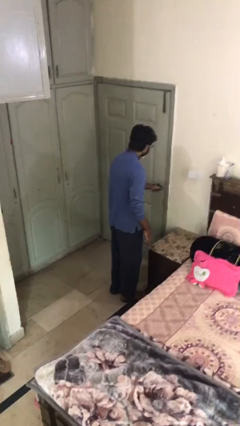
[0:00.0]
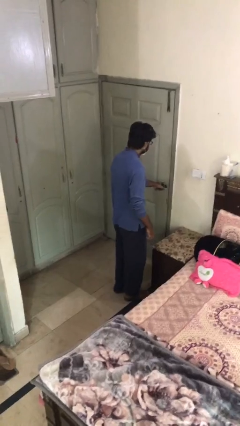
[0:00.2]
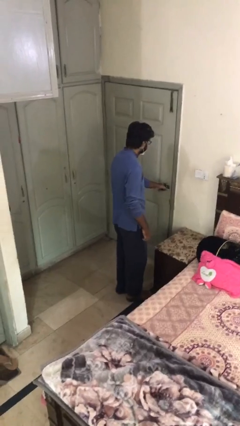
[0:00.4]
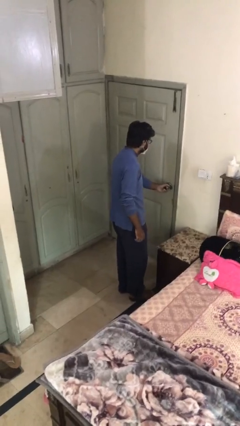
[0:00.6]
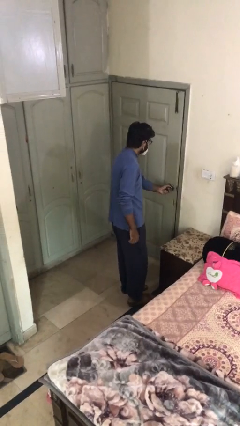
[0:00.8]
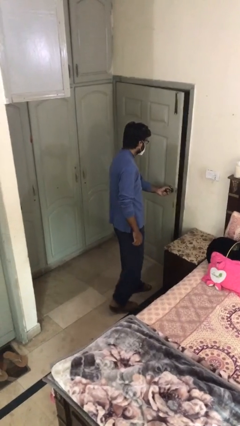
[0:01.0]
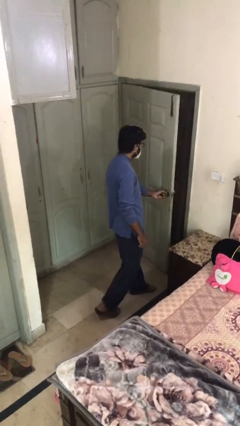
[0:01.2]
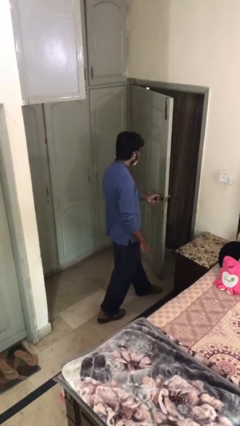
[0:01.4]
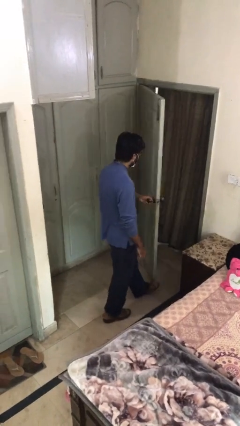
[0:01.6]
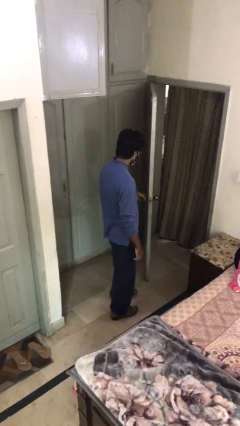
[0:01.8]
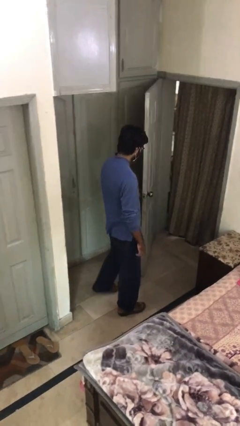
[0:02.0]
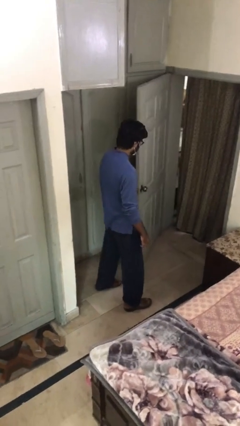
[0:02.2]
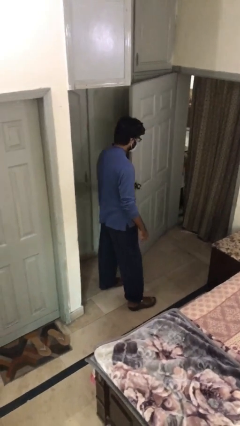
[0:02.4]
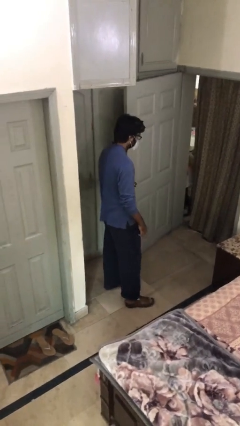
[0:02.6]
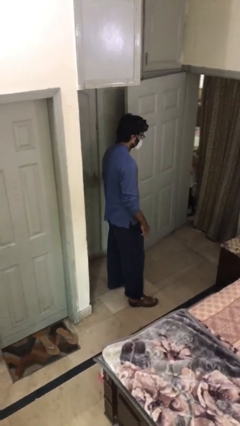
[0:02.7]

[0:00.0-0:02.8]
person opens facility door

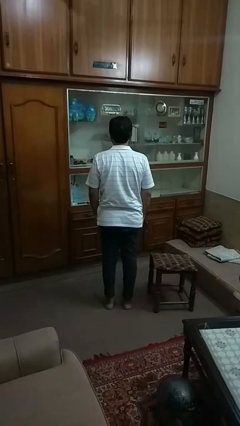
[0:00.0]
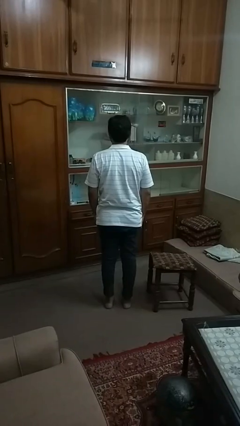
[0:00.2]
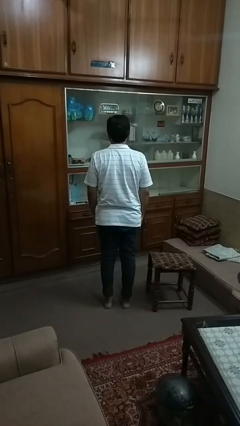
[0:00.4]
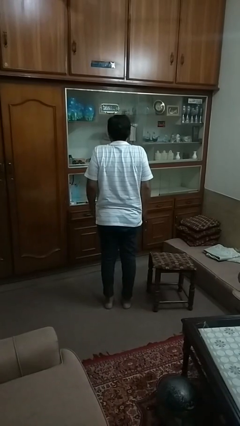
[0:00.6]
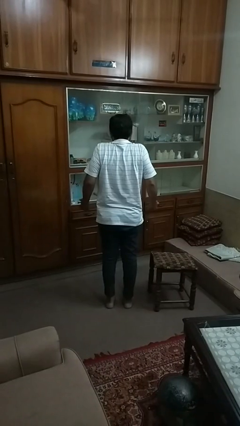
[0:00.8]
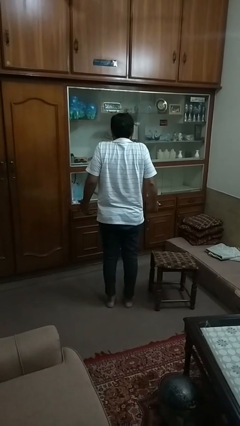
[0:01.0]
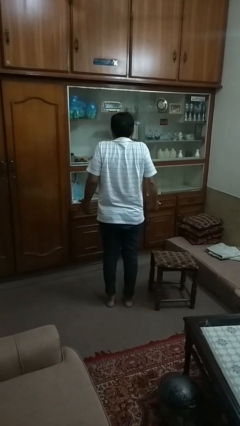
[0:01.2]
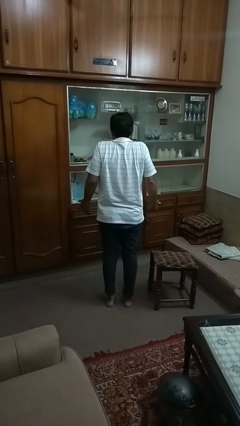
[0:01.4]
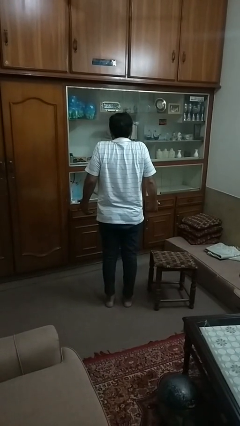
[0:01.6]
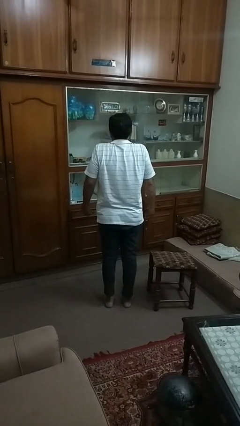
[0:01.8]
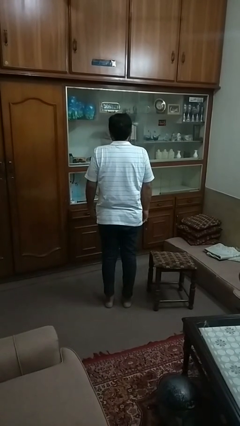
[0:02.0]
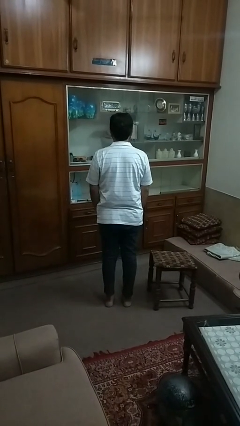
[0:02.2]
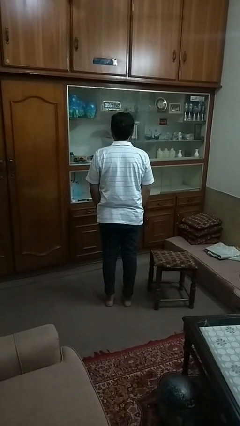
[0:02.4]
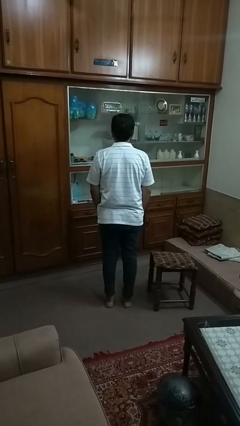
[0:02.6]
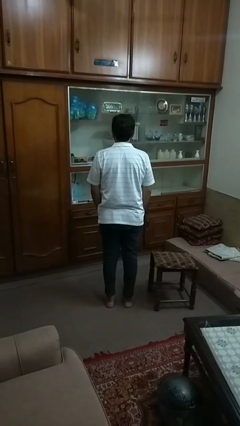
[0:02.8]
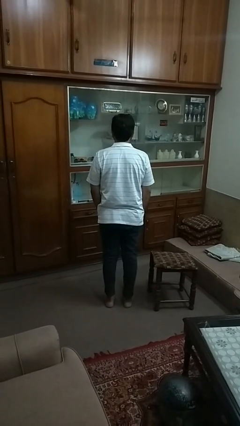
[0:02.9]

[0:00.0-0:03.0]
person shrugs

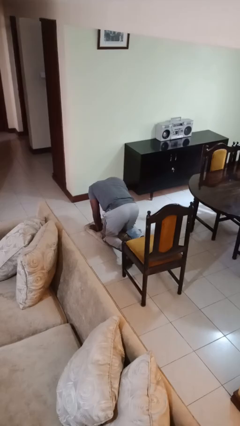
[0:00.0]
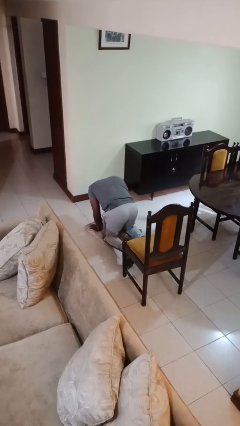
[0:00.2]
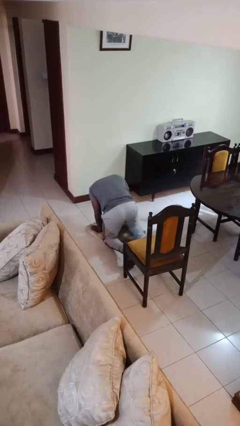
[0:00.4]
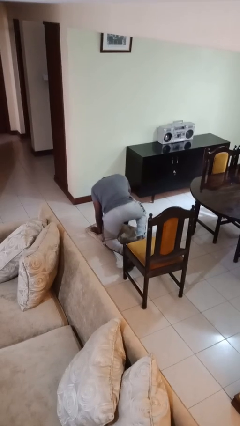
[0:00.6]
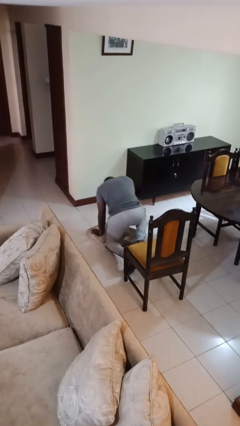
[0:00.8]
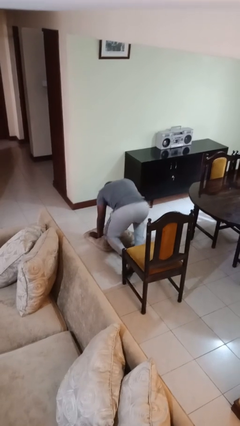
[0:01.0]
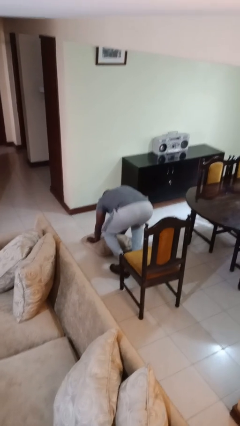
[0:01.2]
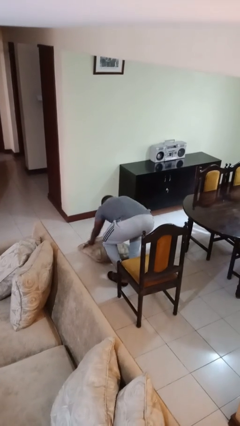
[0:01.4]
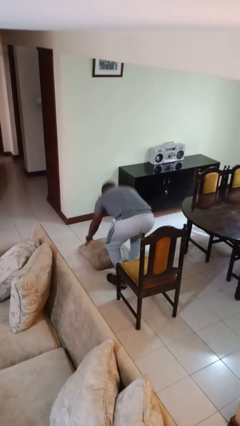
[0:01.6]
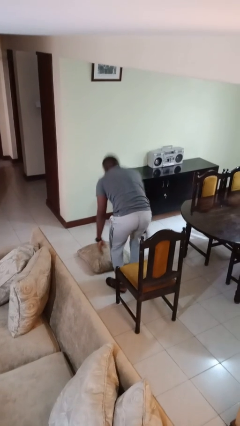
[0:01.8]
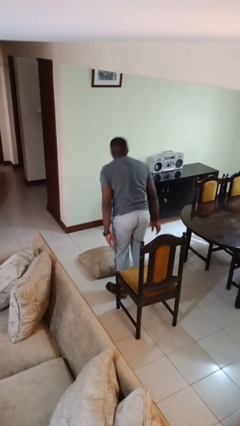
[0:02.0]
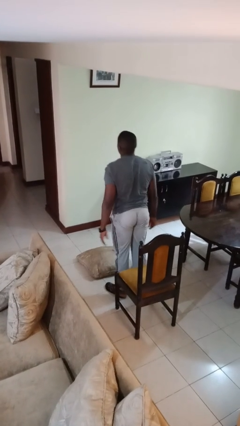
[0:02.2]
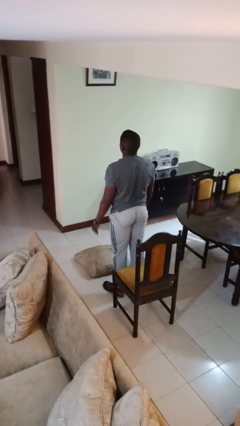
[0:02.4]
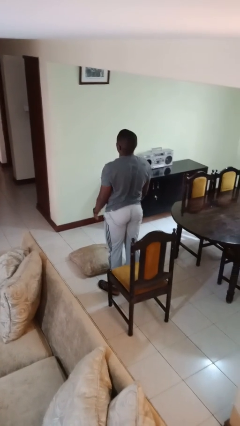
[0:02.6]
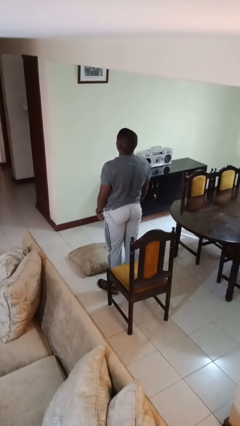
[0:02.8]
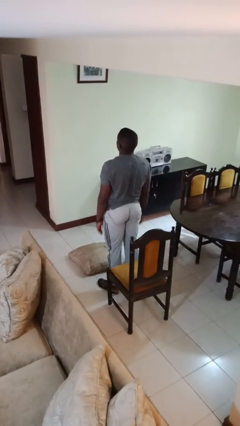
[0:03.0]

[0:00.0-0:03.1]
person stands up from floor

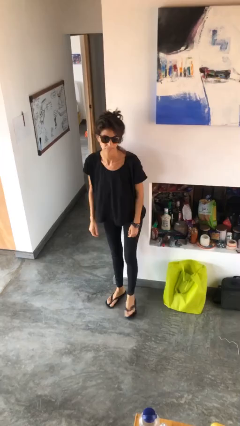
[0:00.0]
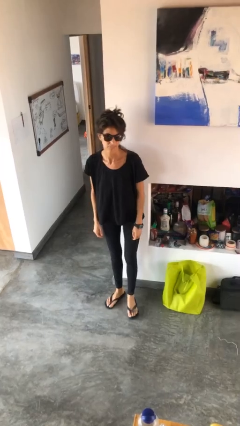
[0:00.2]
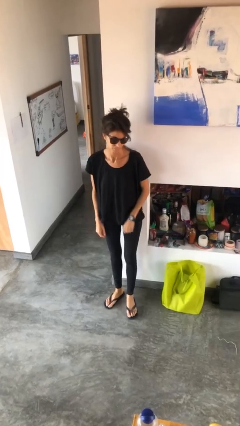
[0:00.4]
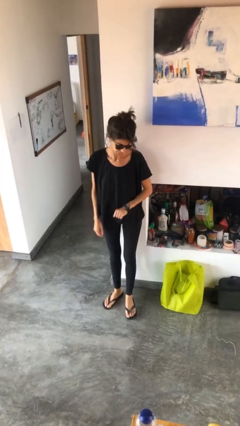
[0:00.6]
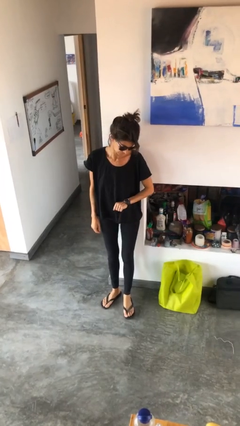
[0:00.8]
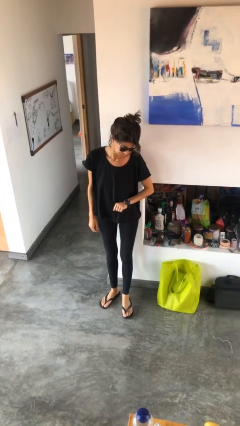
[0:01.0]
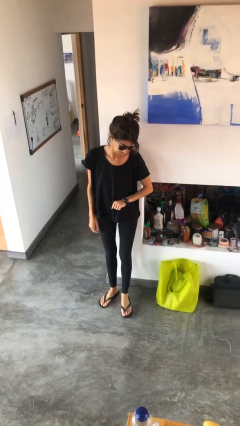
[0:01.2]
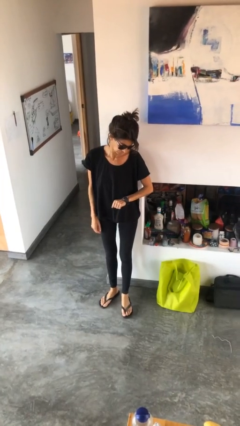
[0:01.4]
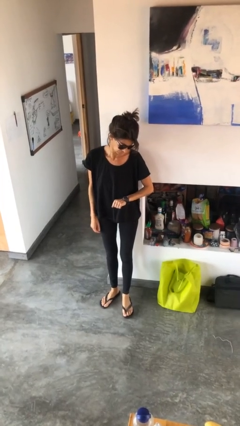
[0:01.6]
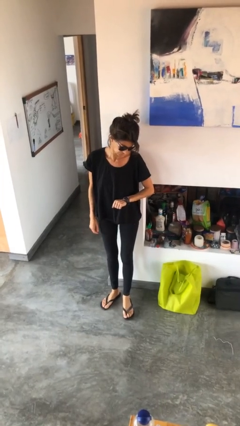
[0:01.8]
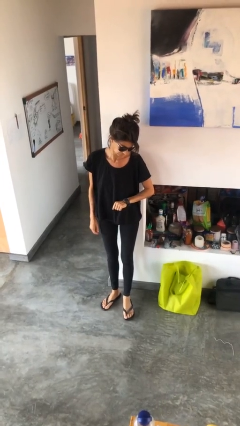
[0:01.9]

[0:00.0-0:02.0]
person looks at wristwatch

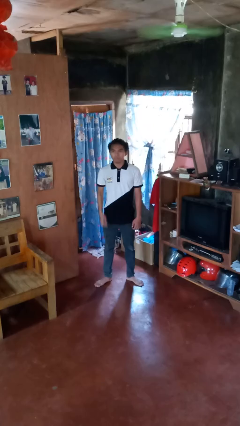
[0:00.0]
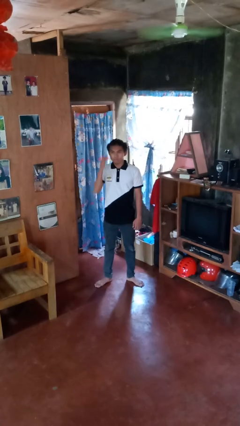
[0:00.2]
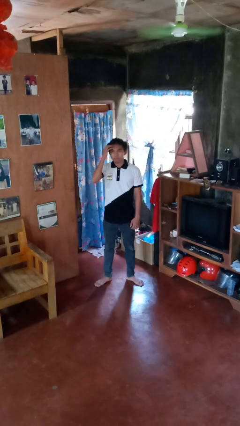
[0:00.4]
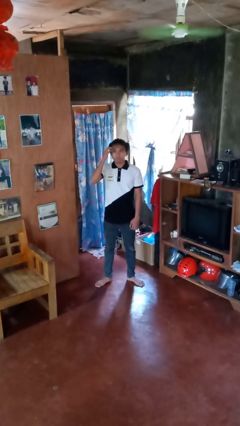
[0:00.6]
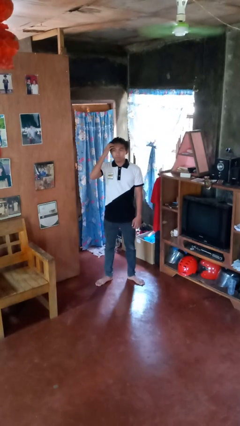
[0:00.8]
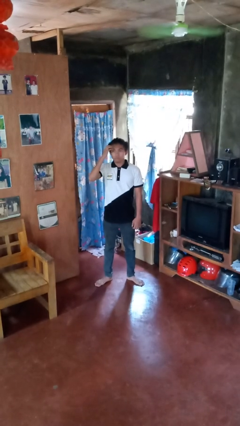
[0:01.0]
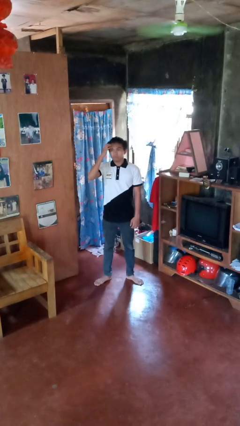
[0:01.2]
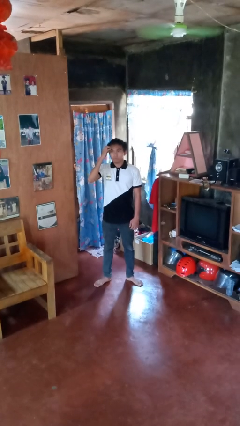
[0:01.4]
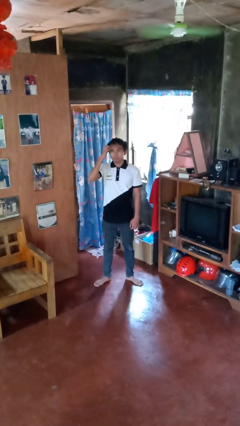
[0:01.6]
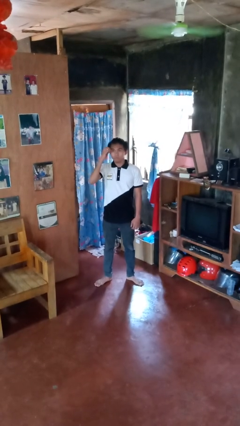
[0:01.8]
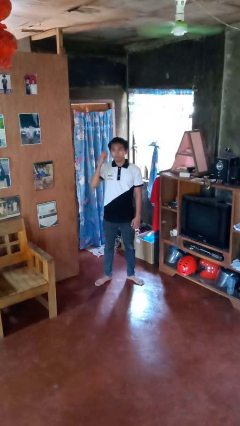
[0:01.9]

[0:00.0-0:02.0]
person scratches face

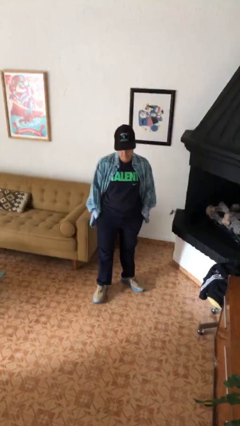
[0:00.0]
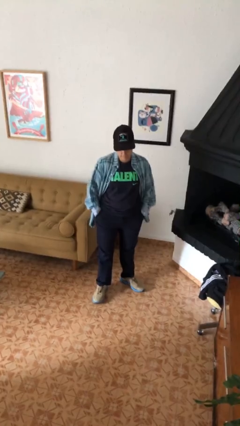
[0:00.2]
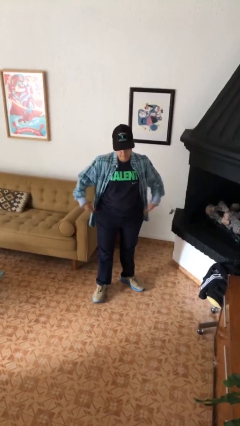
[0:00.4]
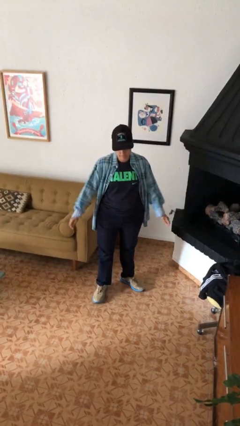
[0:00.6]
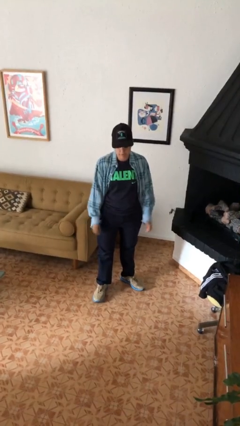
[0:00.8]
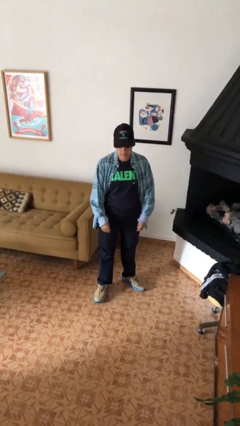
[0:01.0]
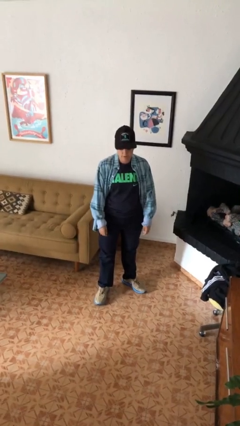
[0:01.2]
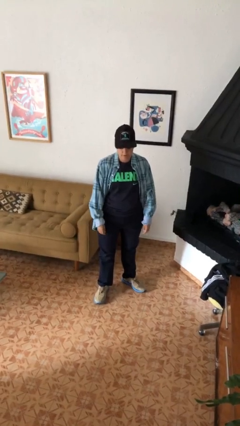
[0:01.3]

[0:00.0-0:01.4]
person puts hands in back pockets

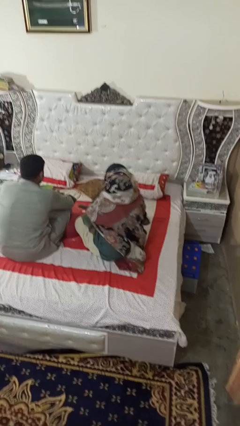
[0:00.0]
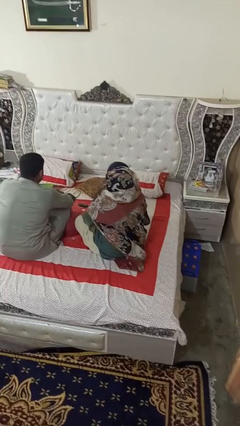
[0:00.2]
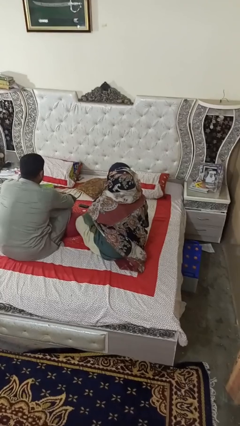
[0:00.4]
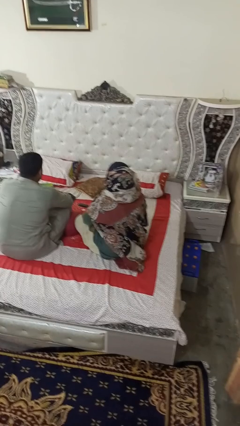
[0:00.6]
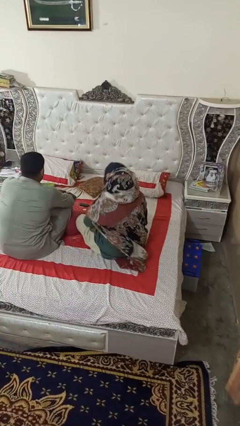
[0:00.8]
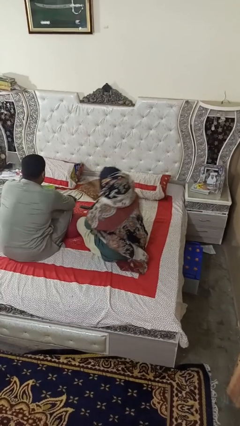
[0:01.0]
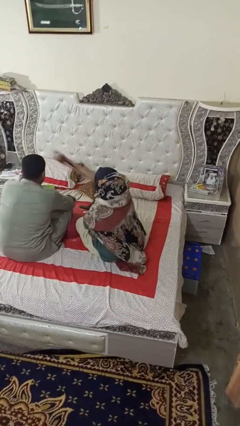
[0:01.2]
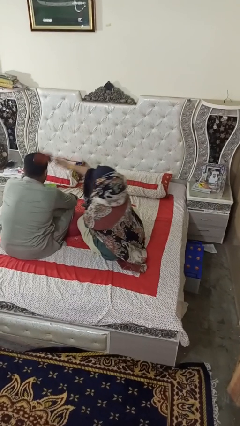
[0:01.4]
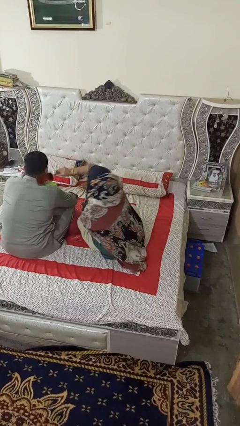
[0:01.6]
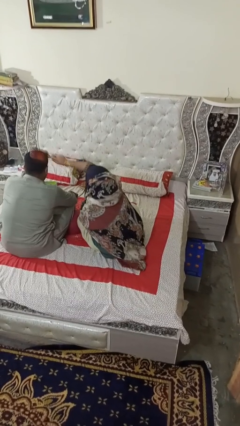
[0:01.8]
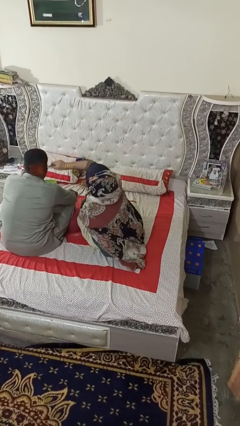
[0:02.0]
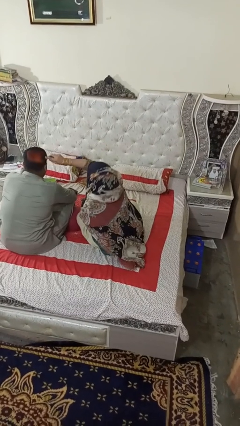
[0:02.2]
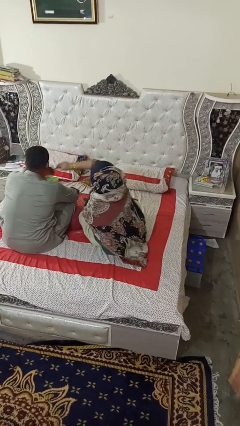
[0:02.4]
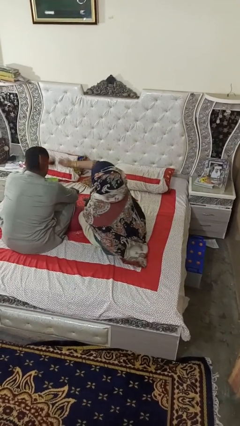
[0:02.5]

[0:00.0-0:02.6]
person brushes hair of person
